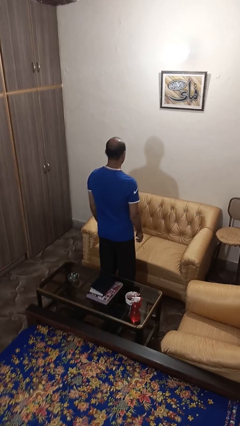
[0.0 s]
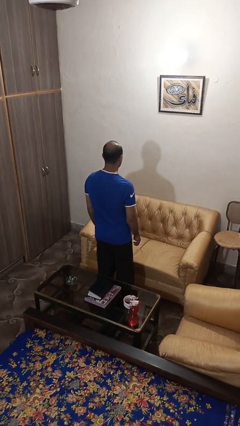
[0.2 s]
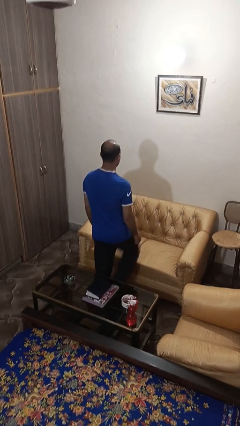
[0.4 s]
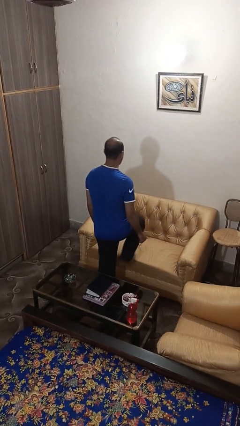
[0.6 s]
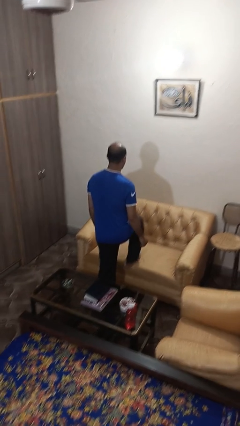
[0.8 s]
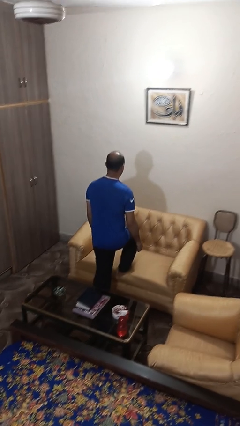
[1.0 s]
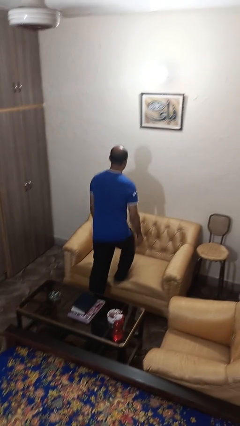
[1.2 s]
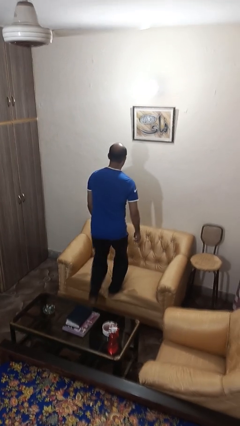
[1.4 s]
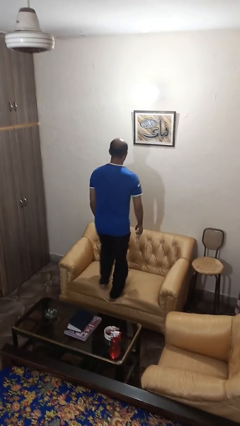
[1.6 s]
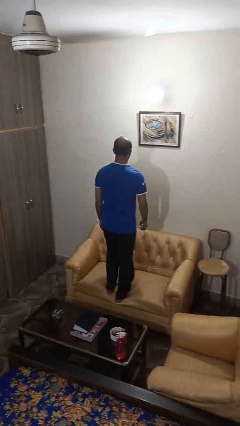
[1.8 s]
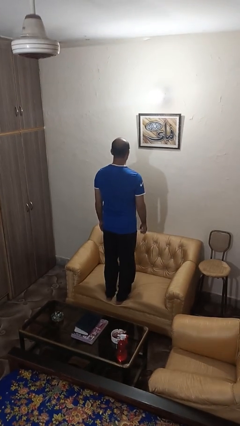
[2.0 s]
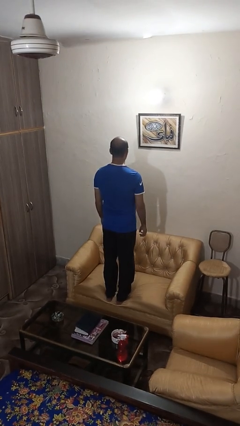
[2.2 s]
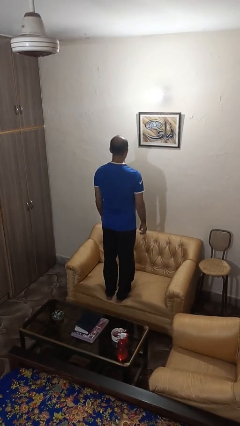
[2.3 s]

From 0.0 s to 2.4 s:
person climbs on couch

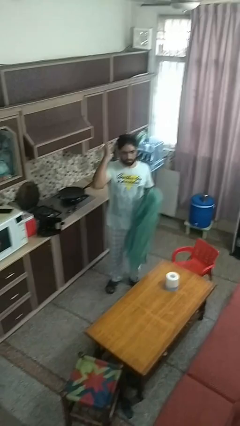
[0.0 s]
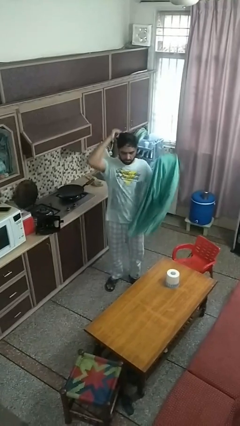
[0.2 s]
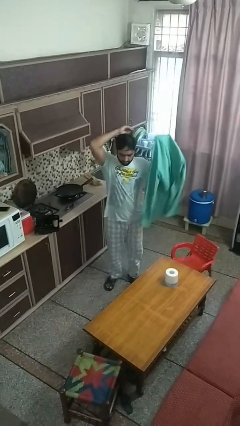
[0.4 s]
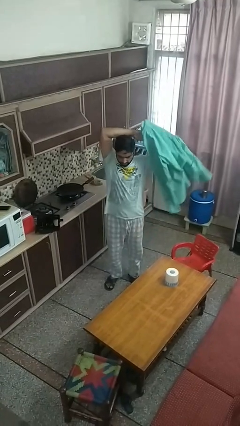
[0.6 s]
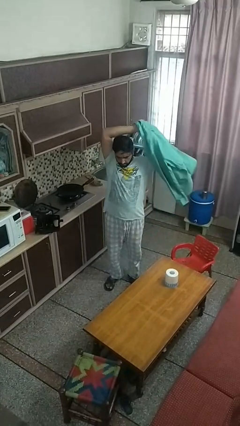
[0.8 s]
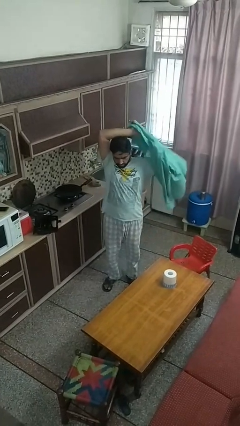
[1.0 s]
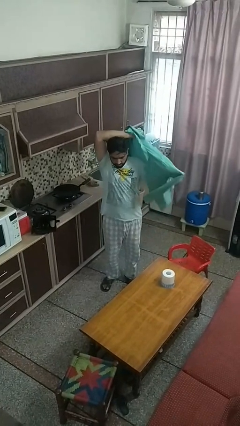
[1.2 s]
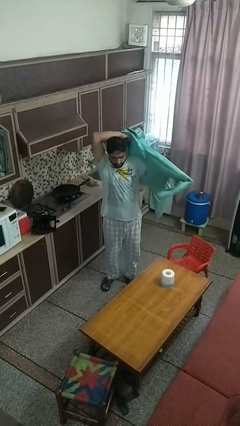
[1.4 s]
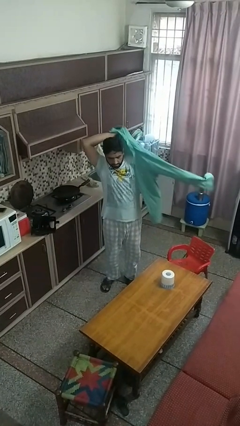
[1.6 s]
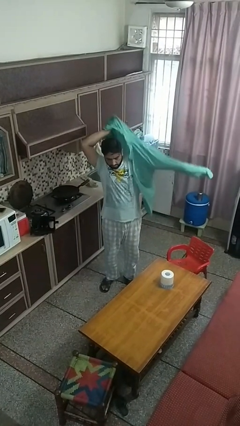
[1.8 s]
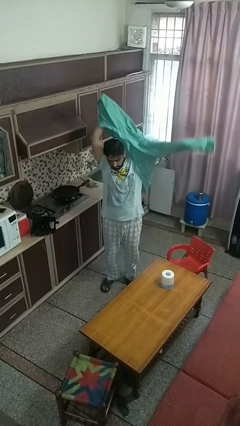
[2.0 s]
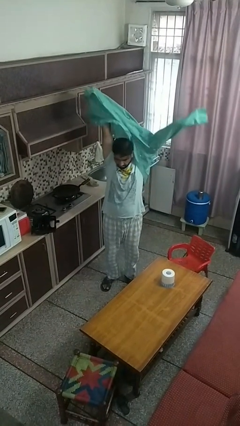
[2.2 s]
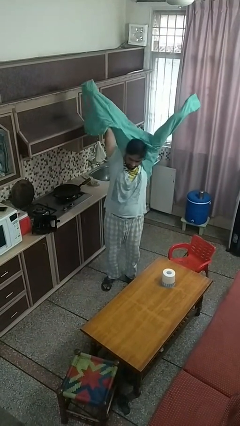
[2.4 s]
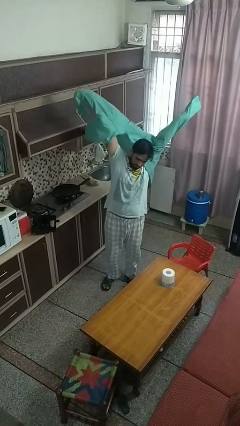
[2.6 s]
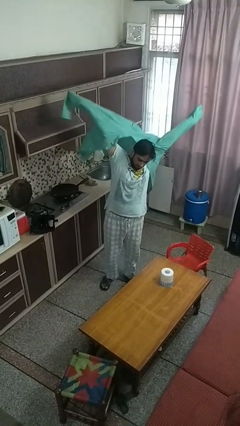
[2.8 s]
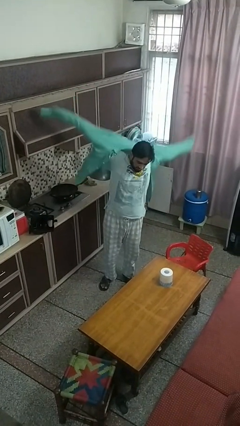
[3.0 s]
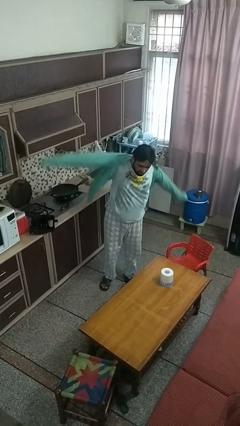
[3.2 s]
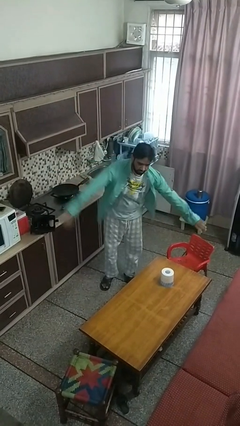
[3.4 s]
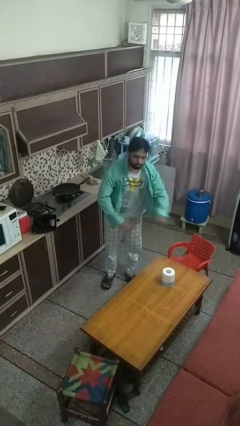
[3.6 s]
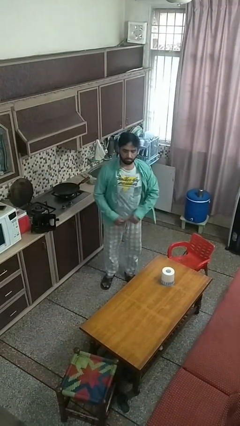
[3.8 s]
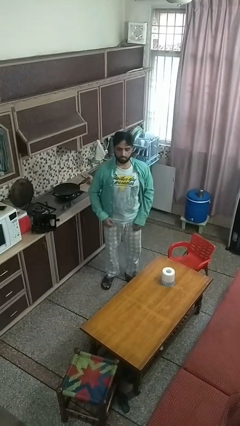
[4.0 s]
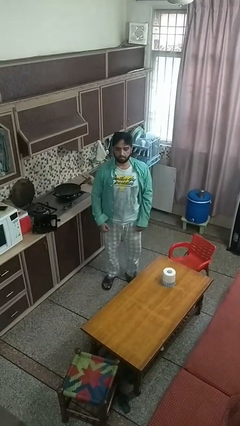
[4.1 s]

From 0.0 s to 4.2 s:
person puts on shirt

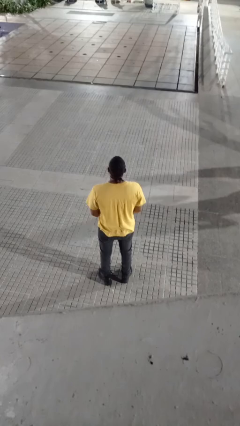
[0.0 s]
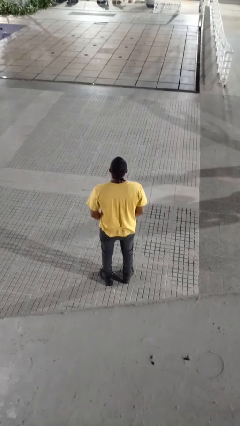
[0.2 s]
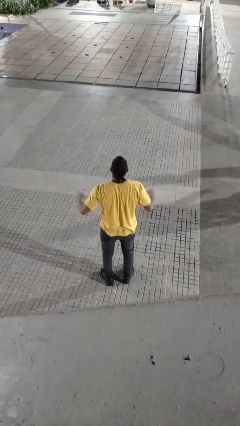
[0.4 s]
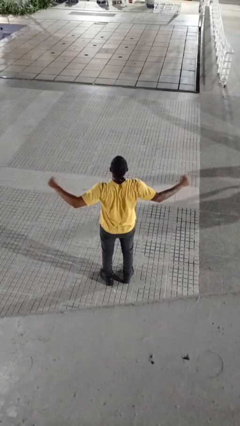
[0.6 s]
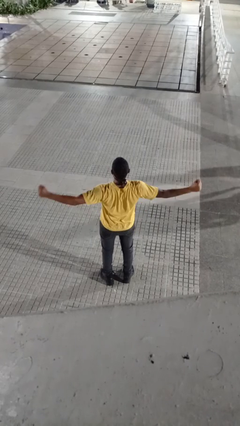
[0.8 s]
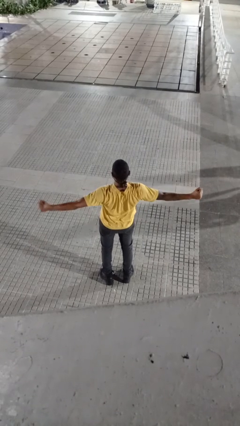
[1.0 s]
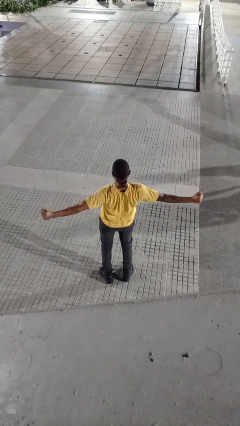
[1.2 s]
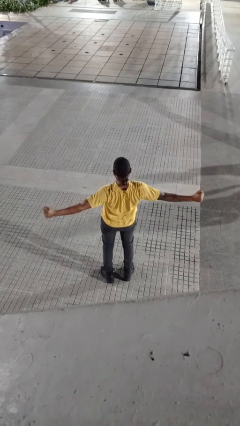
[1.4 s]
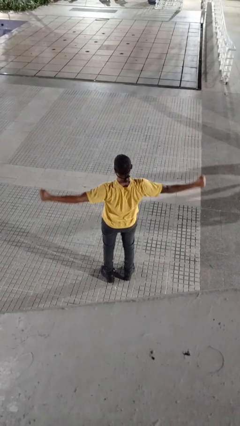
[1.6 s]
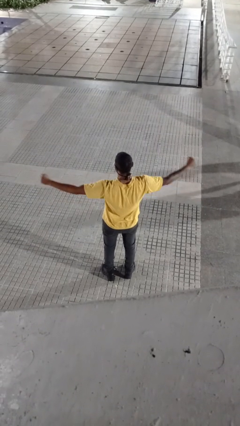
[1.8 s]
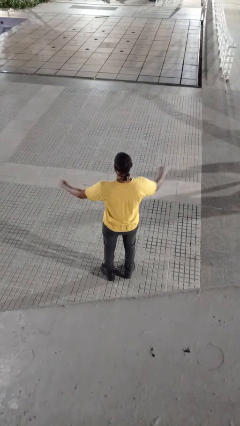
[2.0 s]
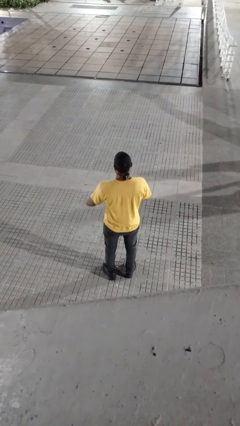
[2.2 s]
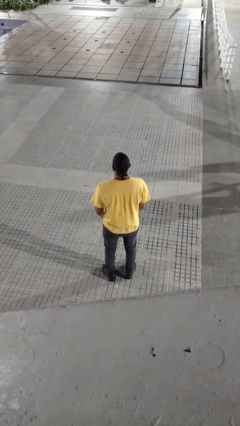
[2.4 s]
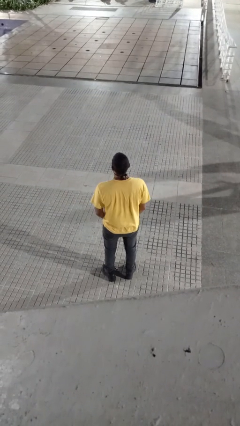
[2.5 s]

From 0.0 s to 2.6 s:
person stretches arms to side

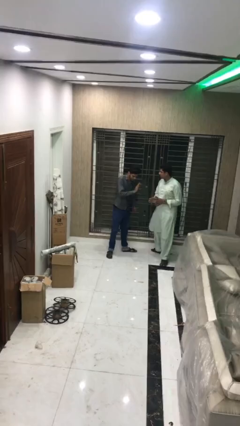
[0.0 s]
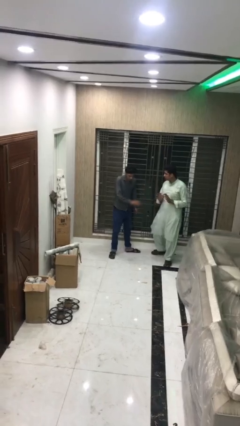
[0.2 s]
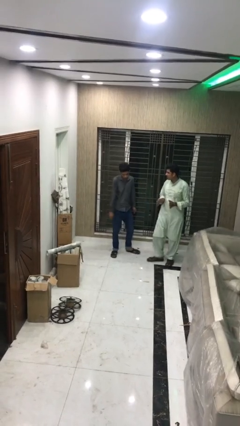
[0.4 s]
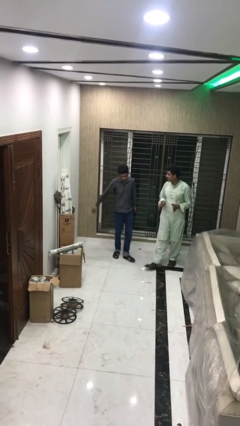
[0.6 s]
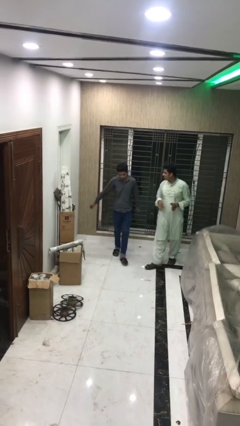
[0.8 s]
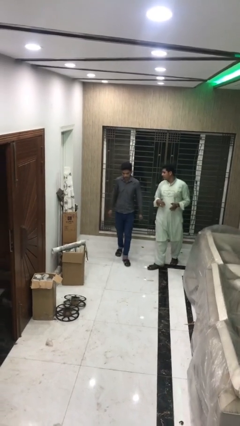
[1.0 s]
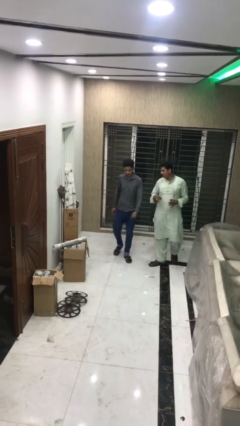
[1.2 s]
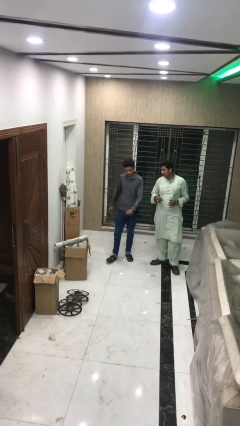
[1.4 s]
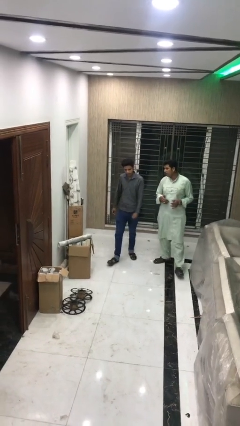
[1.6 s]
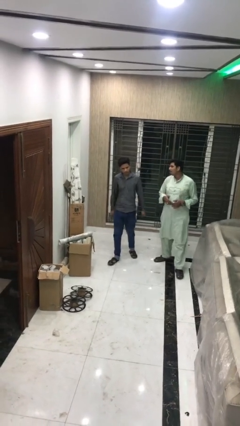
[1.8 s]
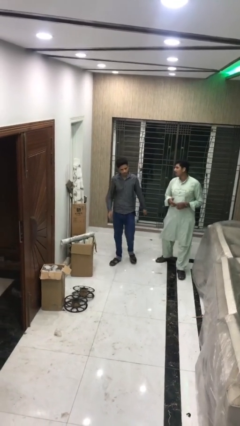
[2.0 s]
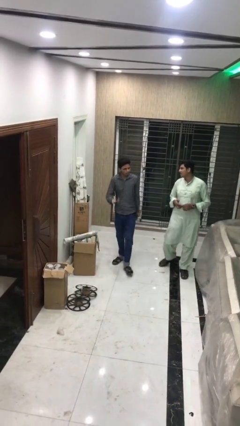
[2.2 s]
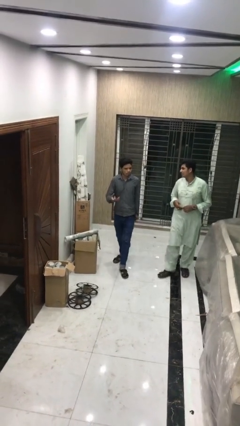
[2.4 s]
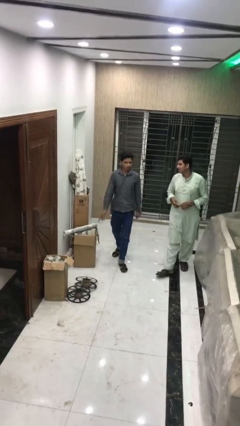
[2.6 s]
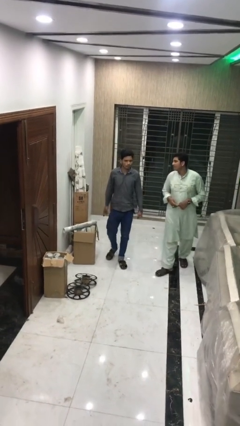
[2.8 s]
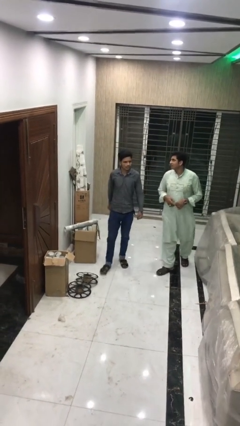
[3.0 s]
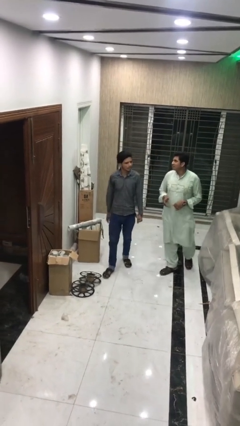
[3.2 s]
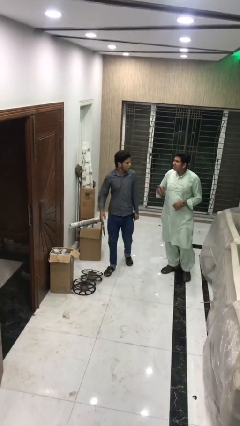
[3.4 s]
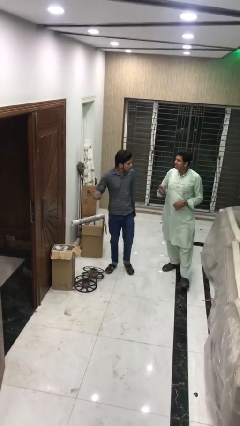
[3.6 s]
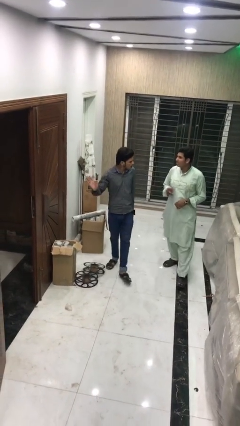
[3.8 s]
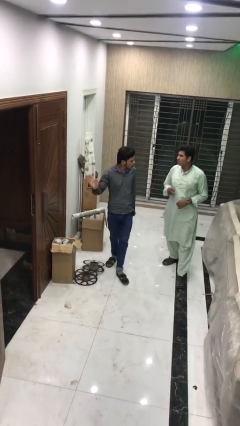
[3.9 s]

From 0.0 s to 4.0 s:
person talks to person

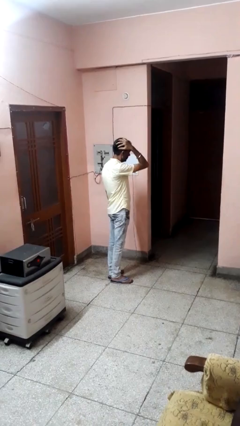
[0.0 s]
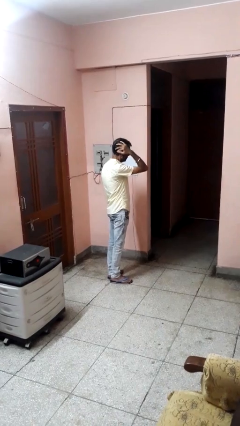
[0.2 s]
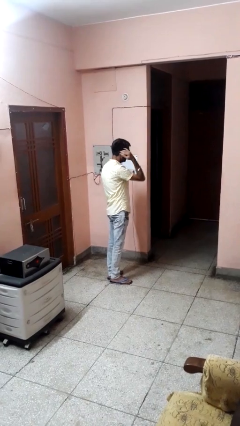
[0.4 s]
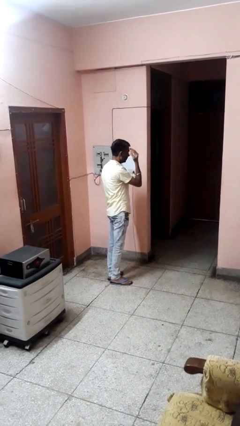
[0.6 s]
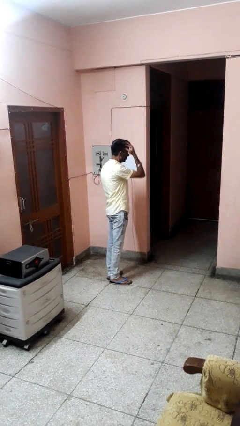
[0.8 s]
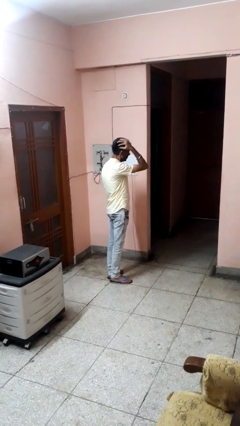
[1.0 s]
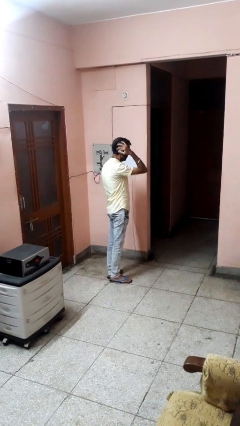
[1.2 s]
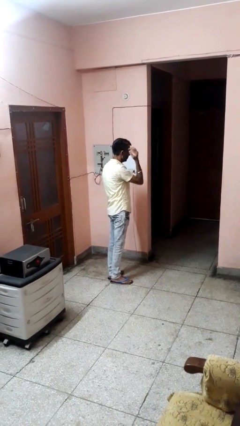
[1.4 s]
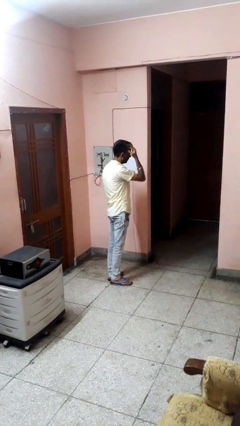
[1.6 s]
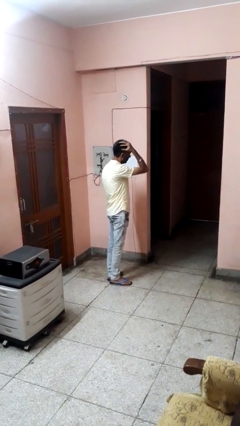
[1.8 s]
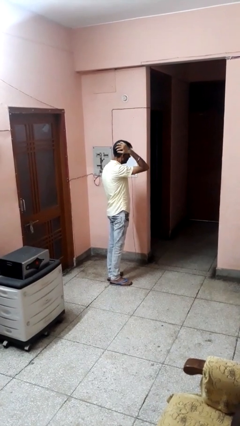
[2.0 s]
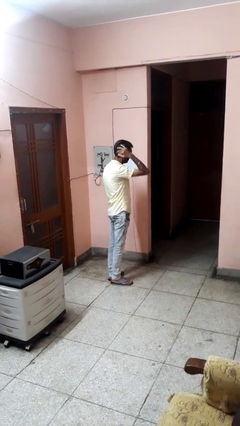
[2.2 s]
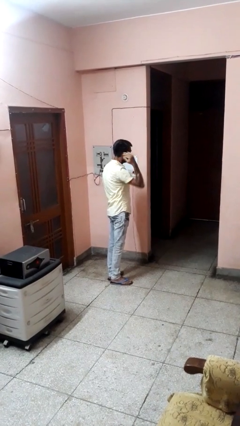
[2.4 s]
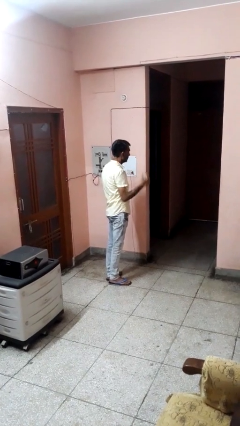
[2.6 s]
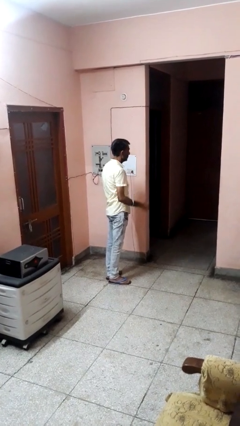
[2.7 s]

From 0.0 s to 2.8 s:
person strokes hair

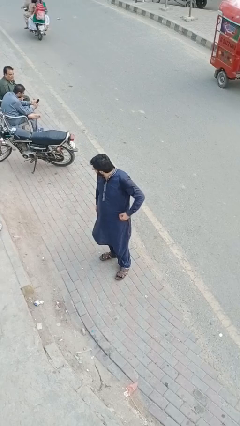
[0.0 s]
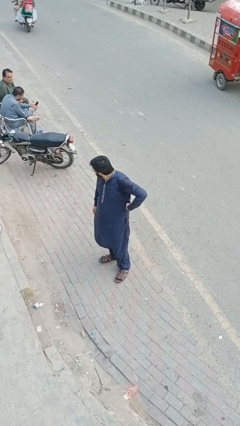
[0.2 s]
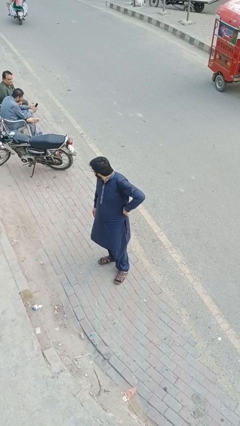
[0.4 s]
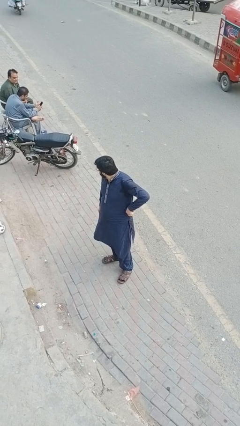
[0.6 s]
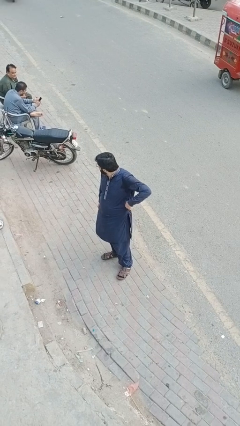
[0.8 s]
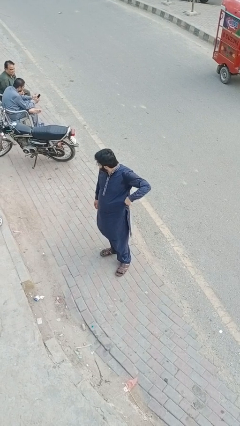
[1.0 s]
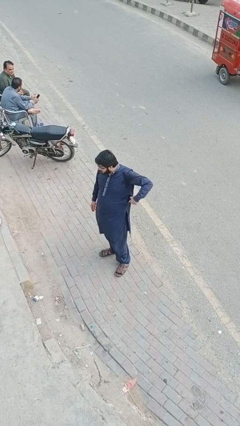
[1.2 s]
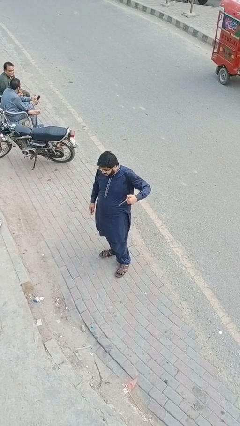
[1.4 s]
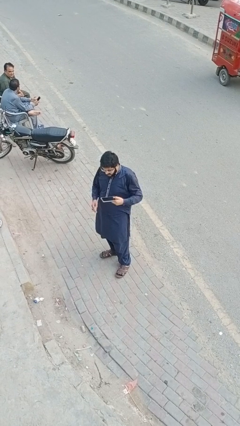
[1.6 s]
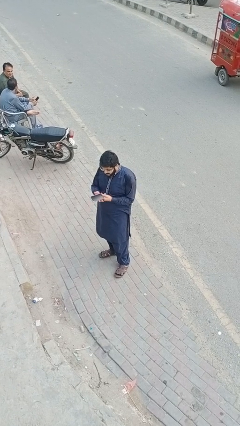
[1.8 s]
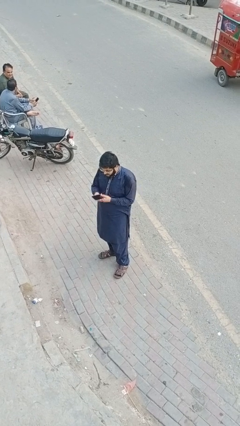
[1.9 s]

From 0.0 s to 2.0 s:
person takes phone from pocket
